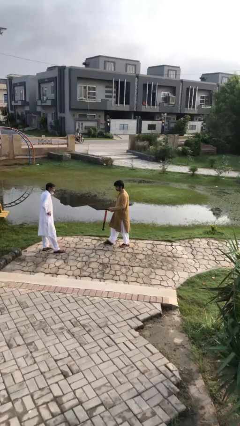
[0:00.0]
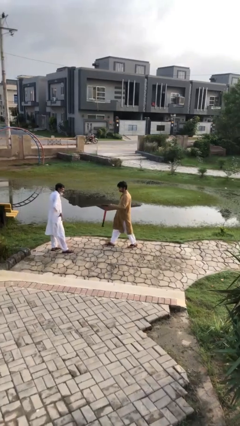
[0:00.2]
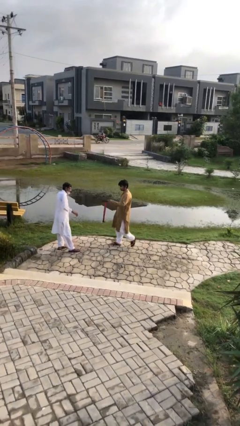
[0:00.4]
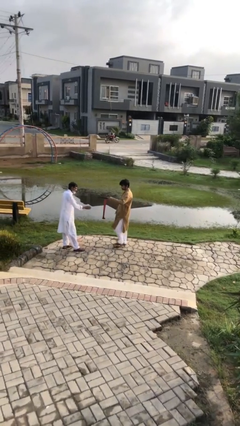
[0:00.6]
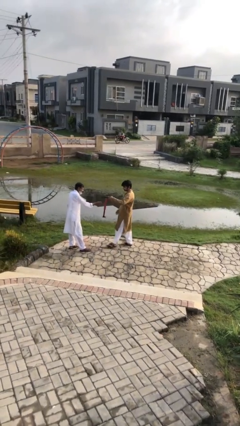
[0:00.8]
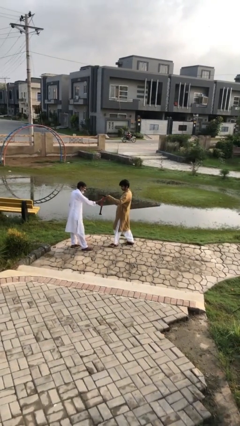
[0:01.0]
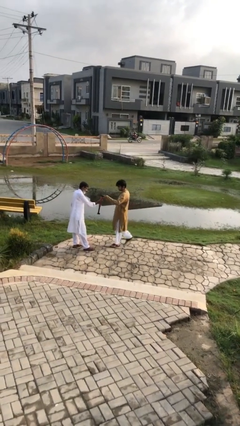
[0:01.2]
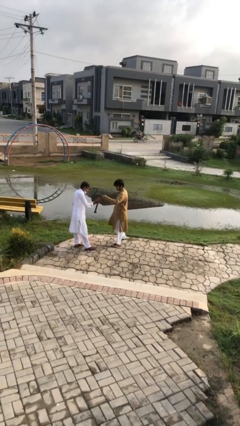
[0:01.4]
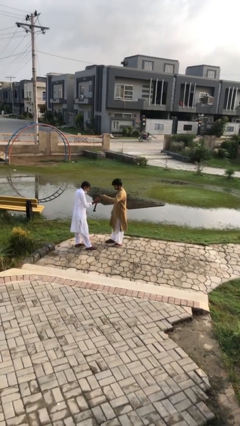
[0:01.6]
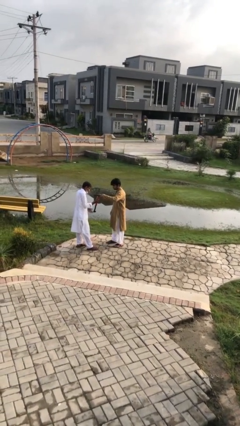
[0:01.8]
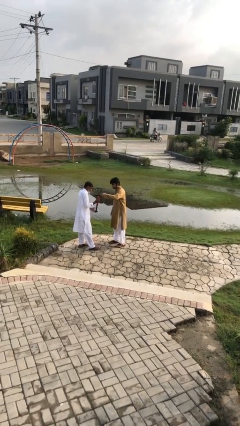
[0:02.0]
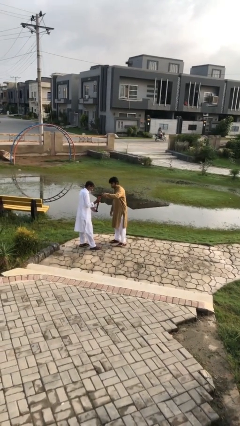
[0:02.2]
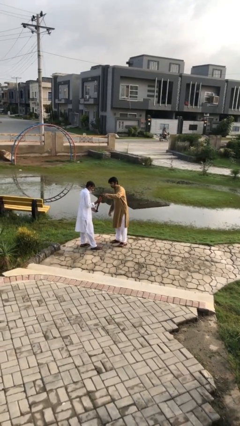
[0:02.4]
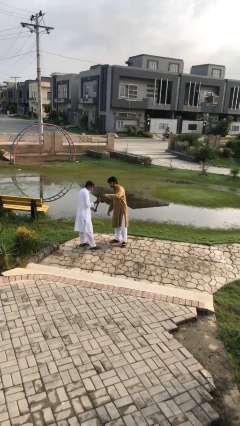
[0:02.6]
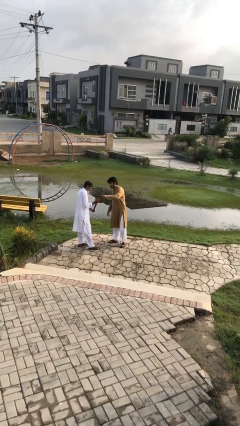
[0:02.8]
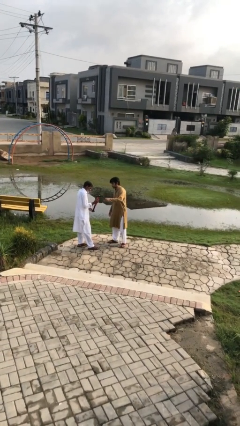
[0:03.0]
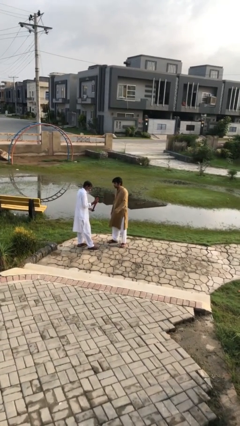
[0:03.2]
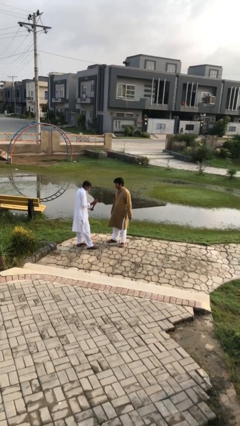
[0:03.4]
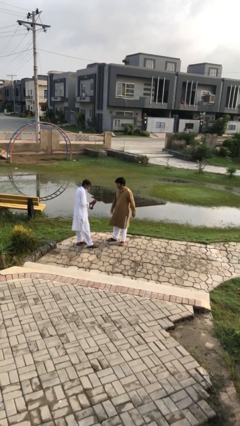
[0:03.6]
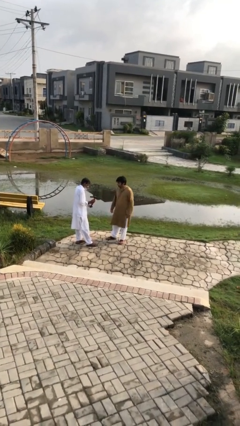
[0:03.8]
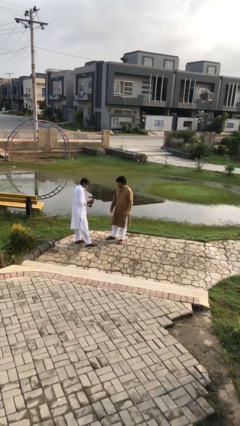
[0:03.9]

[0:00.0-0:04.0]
person transfers object to person

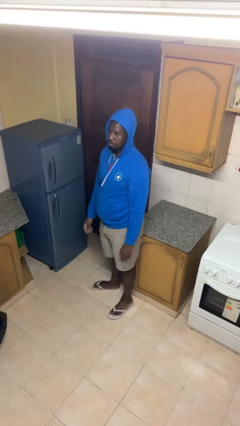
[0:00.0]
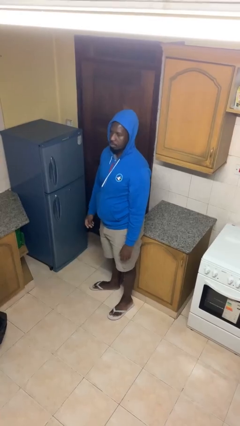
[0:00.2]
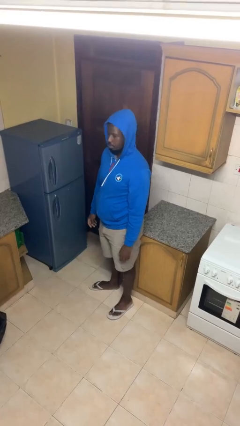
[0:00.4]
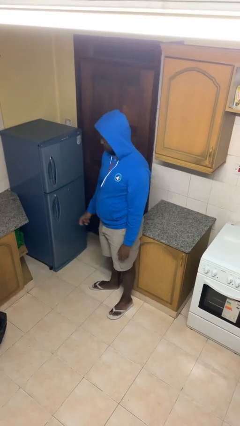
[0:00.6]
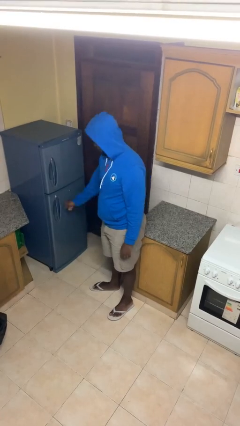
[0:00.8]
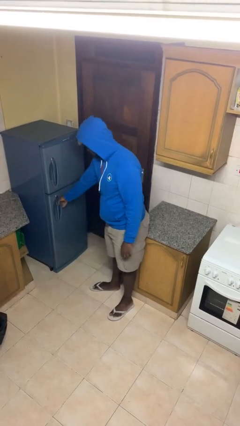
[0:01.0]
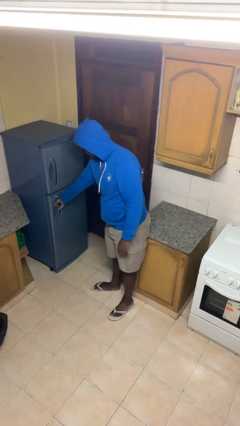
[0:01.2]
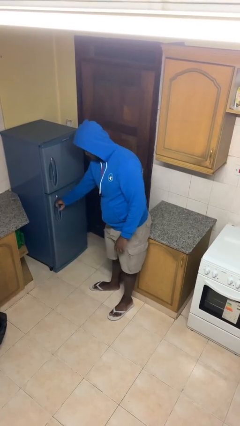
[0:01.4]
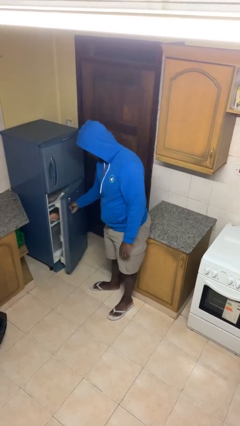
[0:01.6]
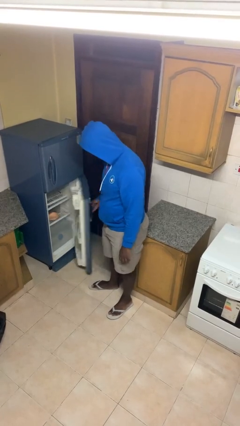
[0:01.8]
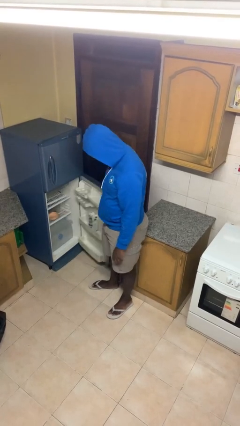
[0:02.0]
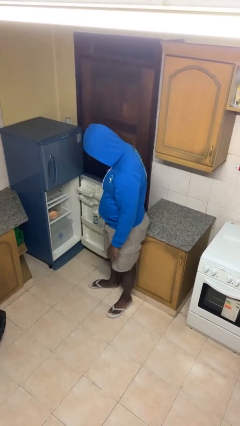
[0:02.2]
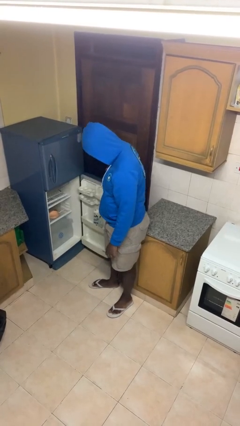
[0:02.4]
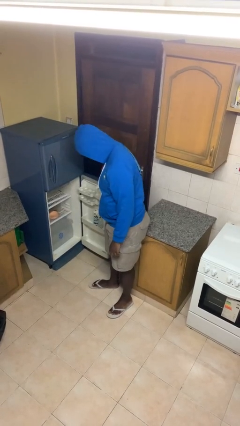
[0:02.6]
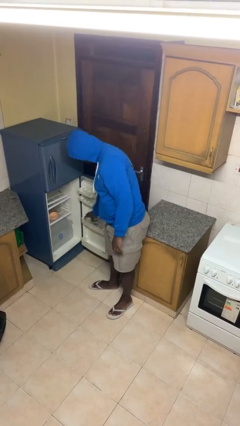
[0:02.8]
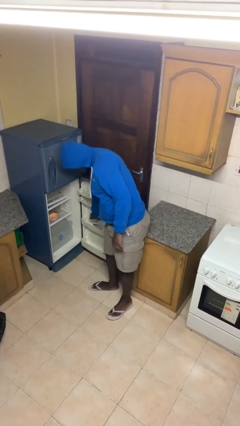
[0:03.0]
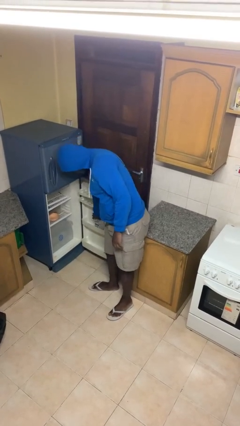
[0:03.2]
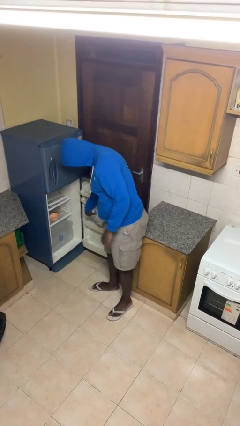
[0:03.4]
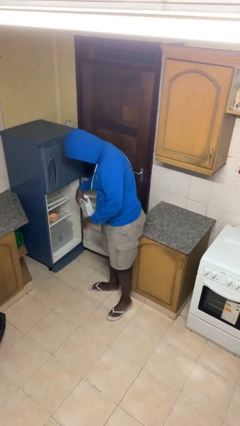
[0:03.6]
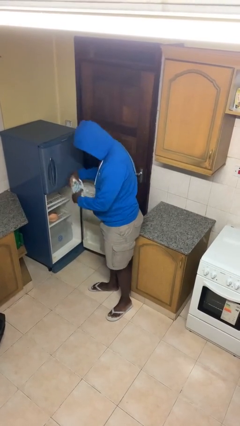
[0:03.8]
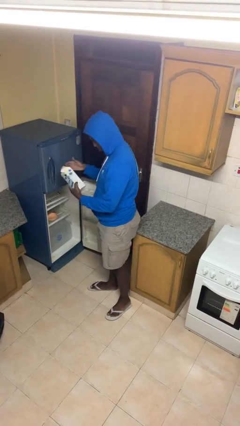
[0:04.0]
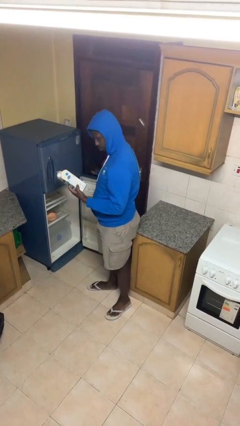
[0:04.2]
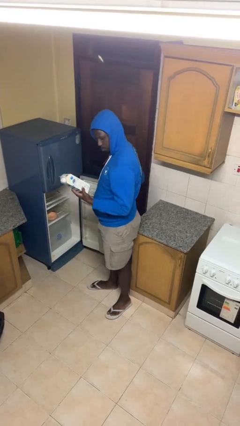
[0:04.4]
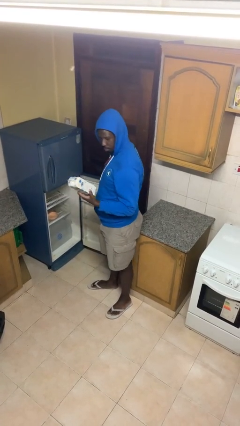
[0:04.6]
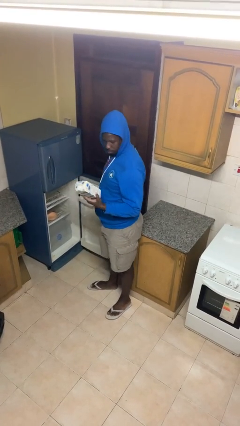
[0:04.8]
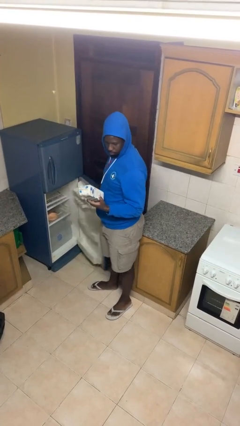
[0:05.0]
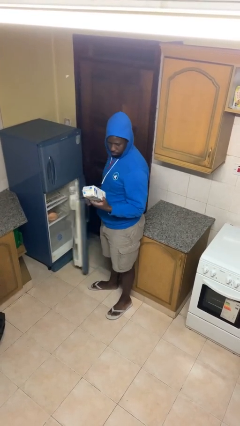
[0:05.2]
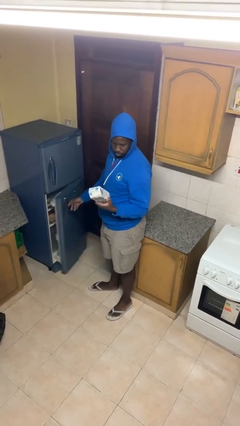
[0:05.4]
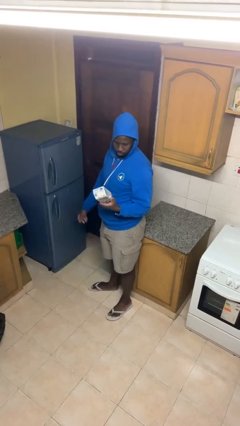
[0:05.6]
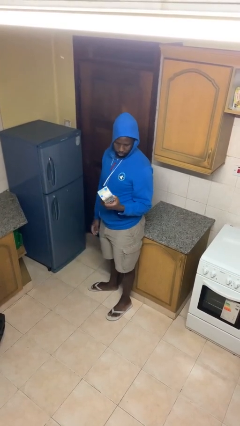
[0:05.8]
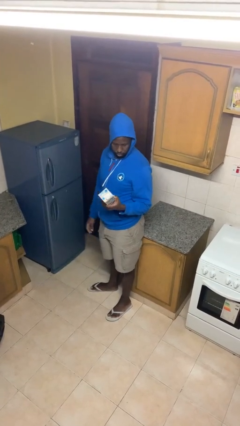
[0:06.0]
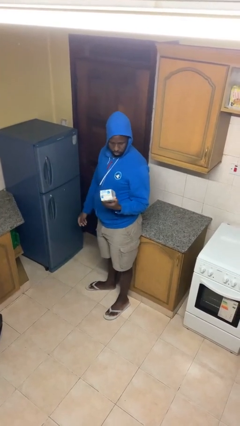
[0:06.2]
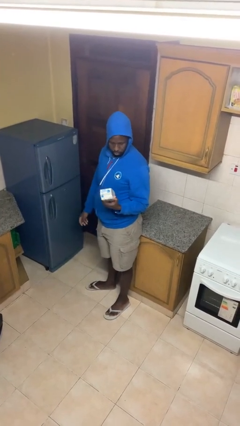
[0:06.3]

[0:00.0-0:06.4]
person takes object from refrigerator

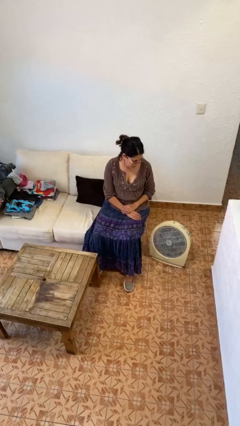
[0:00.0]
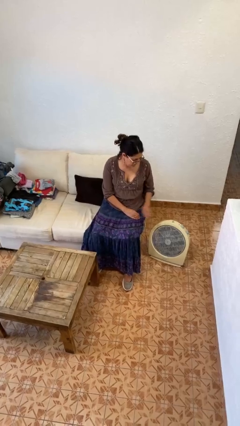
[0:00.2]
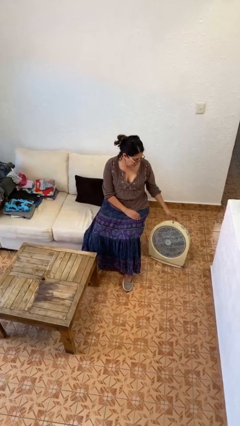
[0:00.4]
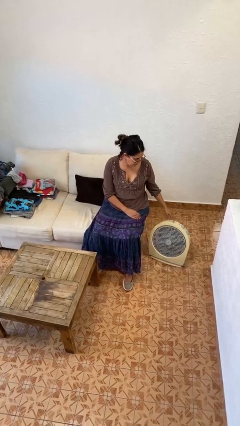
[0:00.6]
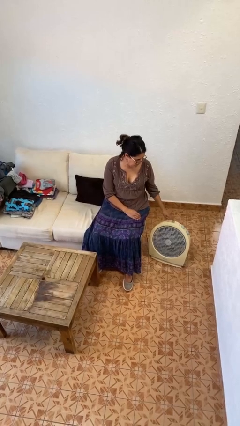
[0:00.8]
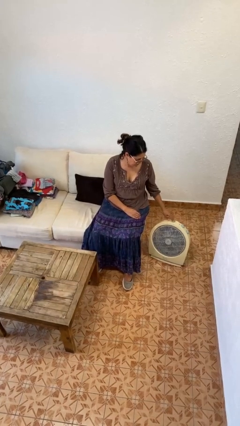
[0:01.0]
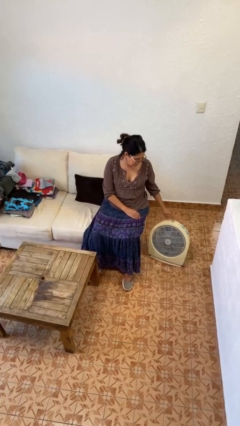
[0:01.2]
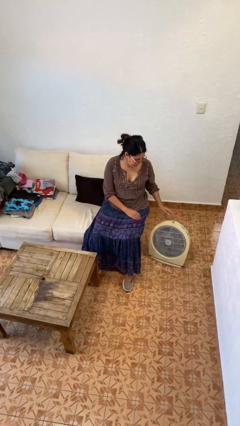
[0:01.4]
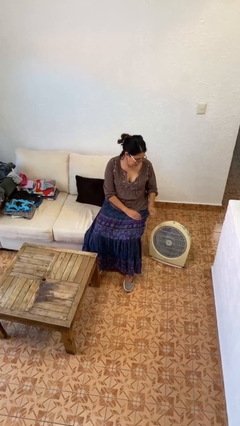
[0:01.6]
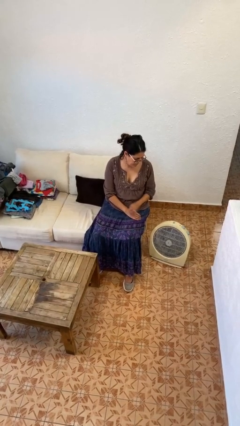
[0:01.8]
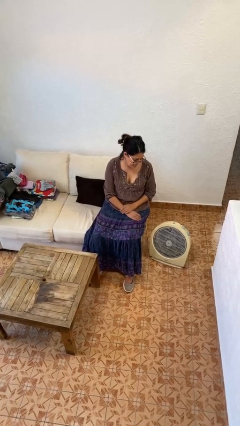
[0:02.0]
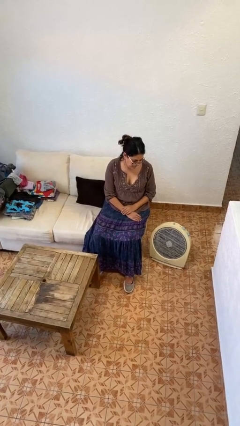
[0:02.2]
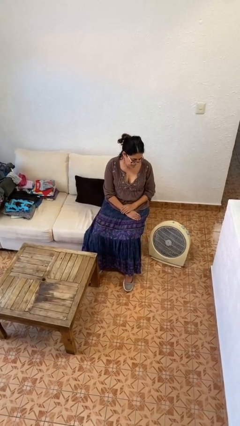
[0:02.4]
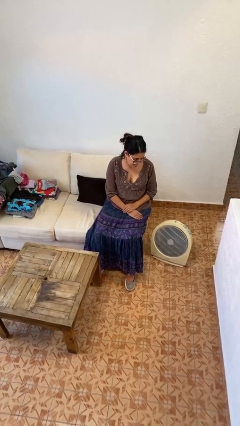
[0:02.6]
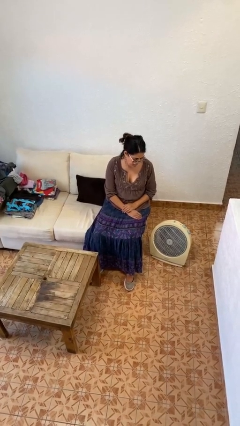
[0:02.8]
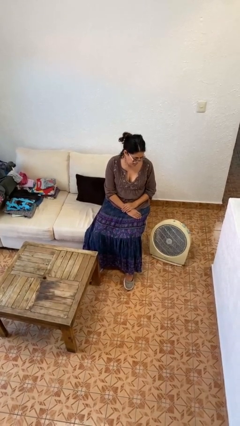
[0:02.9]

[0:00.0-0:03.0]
person turns on fan

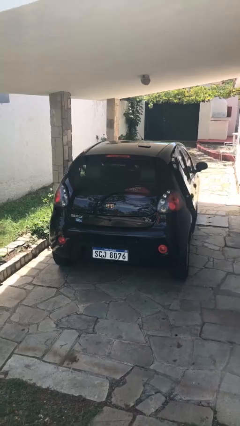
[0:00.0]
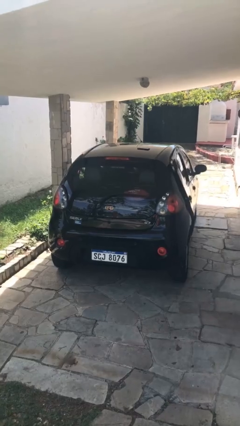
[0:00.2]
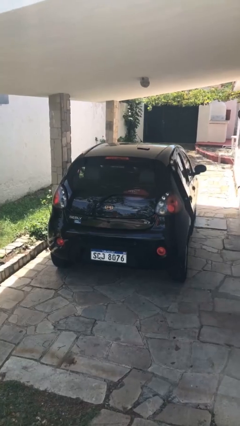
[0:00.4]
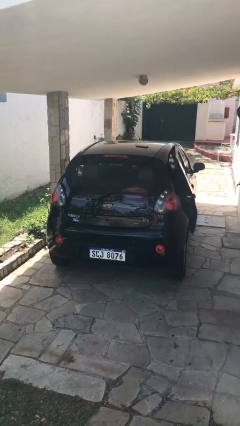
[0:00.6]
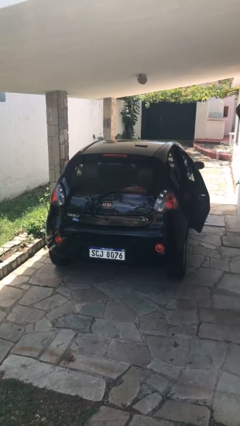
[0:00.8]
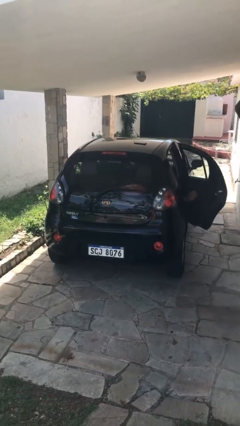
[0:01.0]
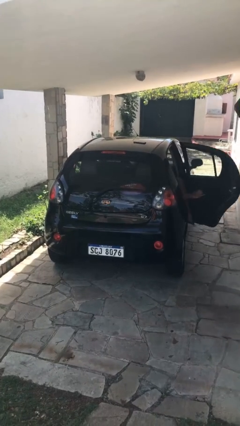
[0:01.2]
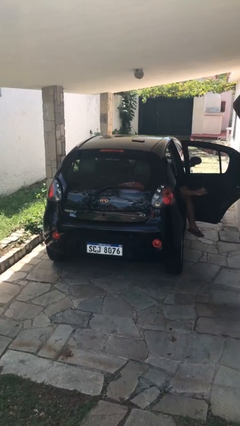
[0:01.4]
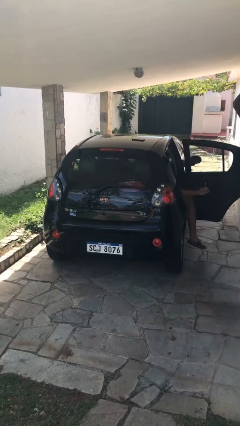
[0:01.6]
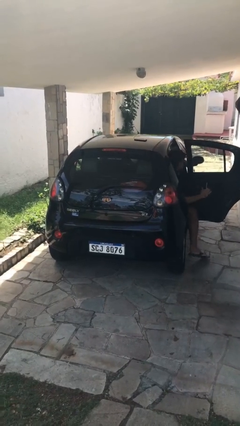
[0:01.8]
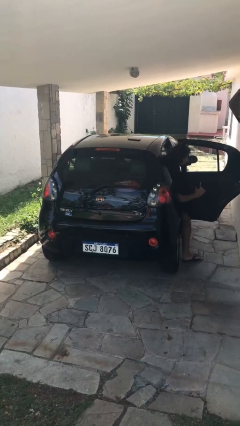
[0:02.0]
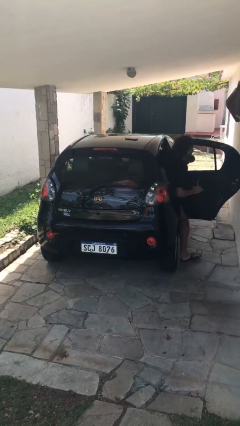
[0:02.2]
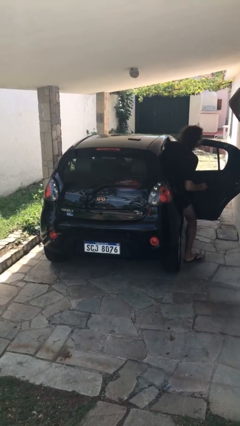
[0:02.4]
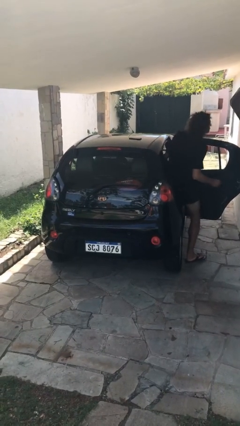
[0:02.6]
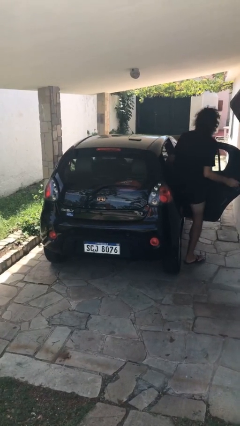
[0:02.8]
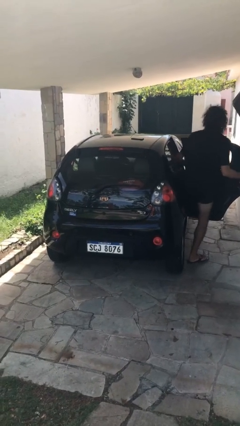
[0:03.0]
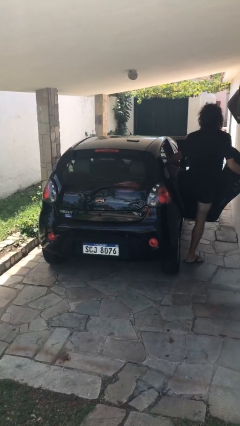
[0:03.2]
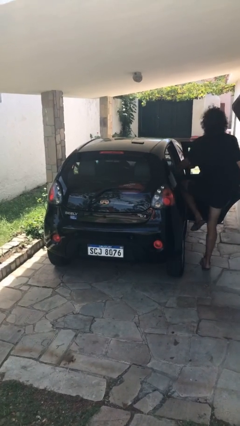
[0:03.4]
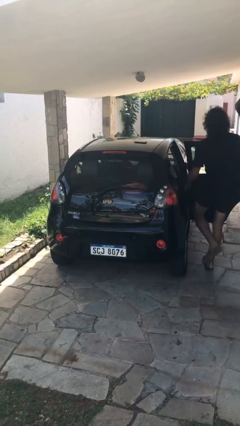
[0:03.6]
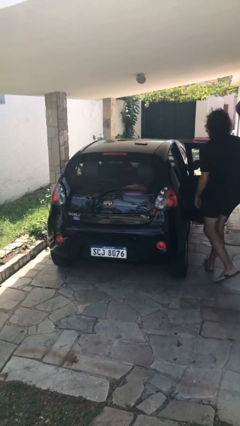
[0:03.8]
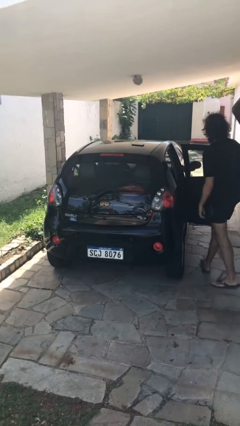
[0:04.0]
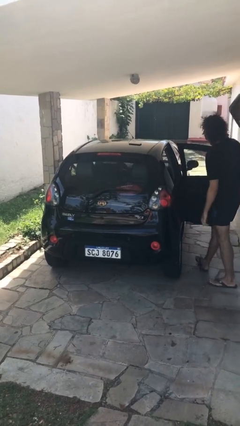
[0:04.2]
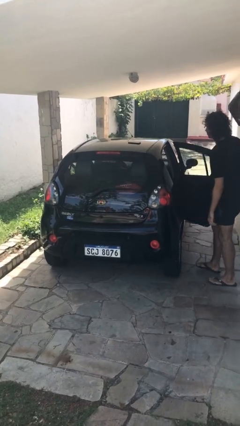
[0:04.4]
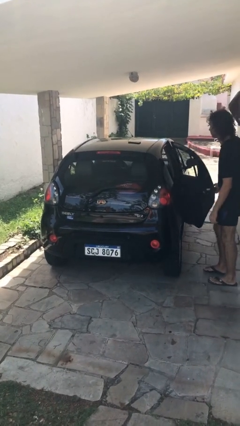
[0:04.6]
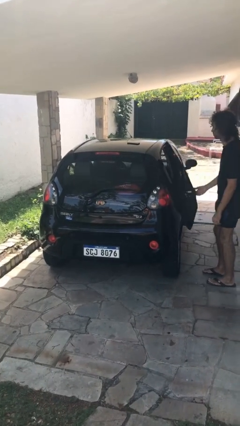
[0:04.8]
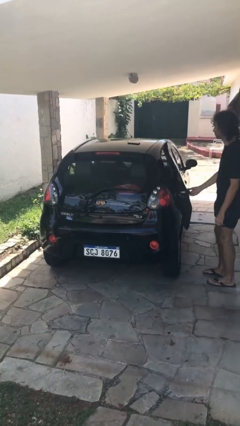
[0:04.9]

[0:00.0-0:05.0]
car drops off person
